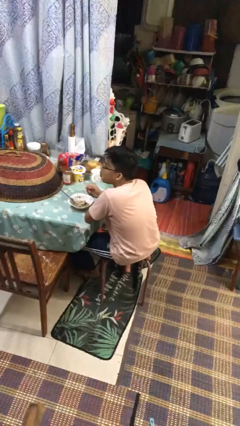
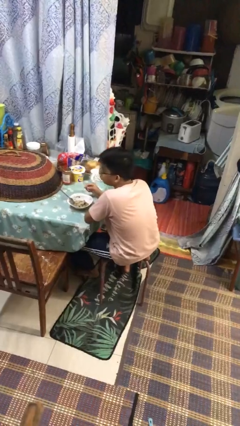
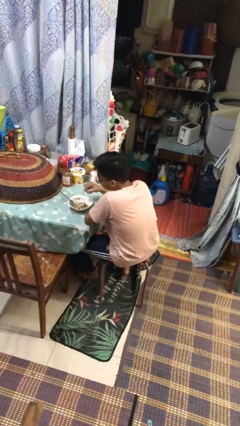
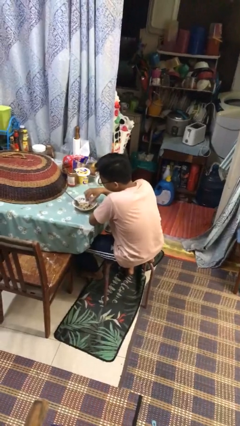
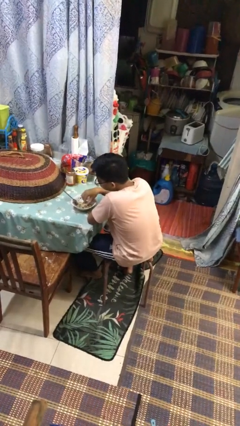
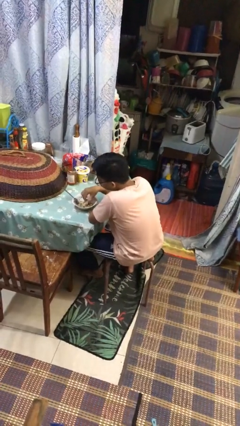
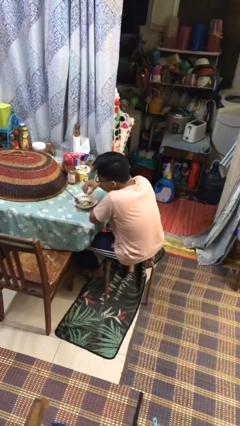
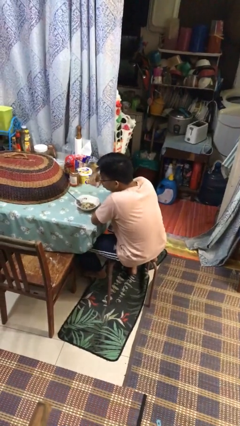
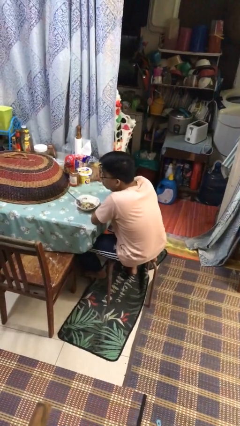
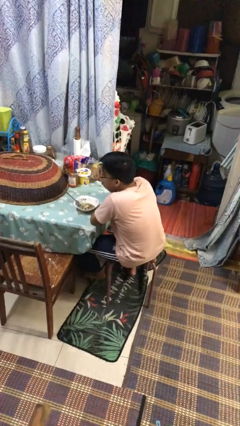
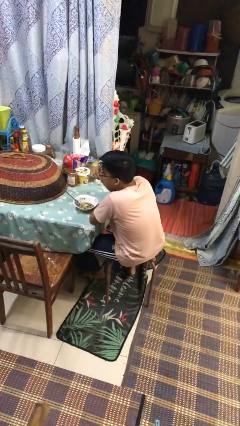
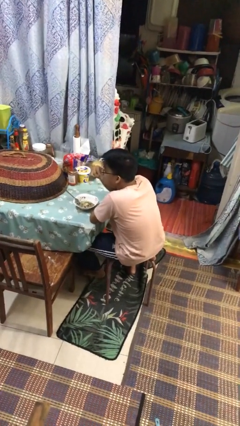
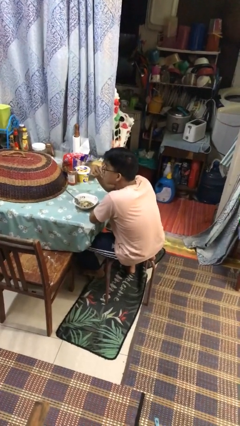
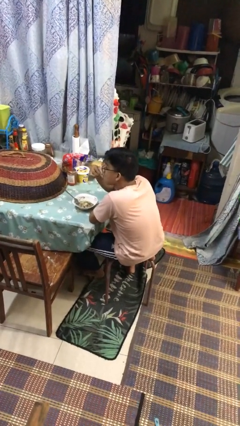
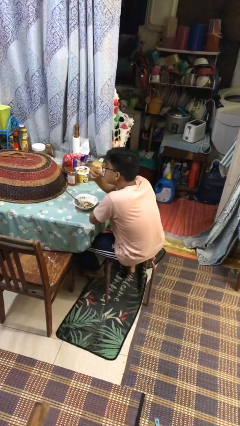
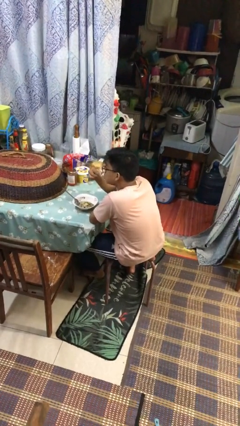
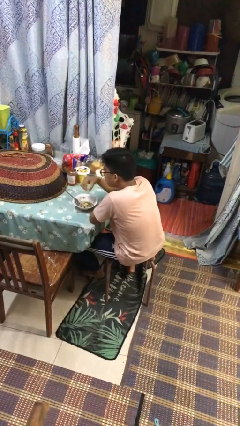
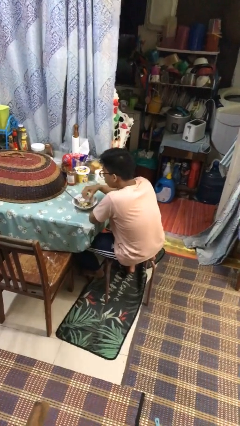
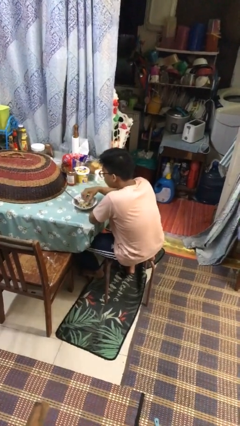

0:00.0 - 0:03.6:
person eats with hands

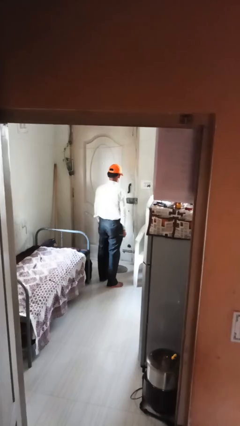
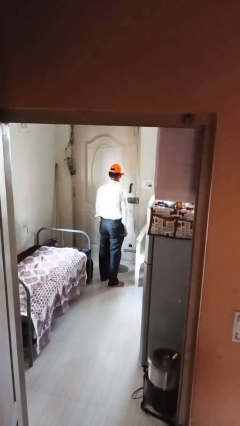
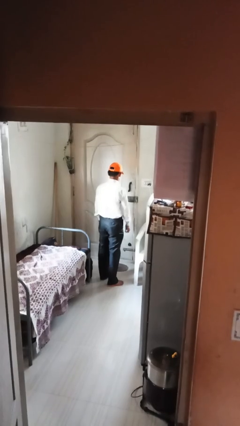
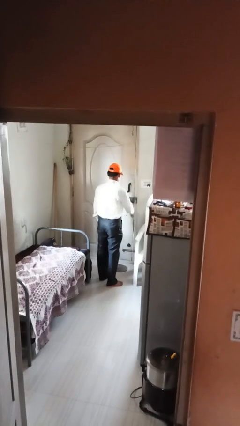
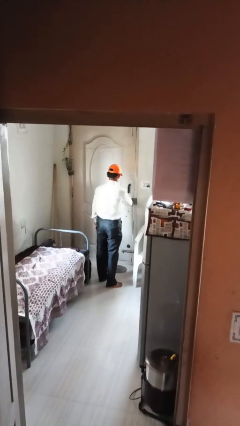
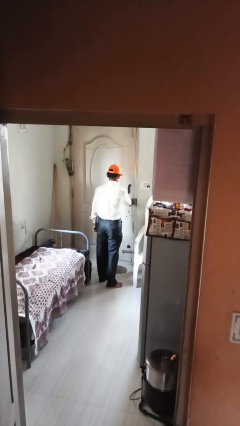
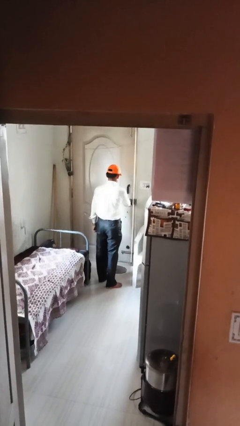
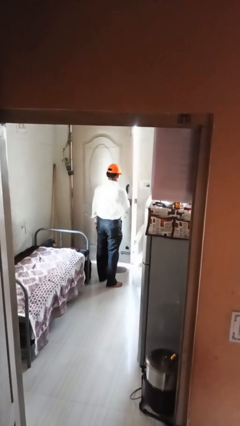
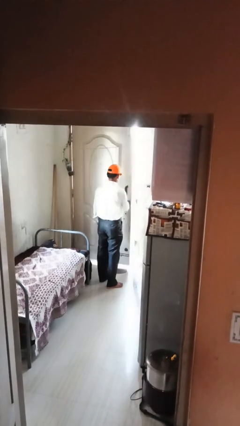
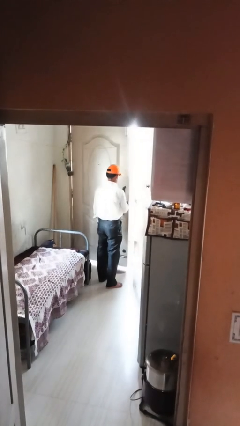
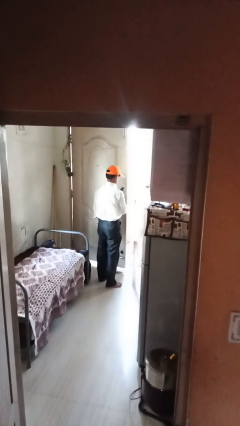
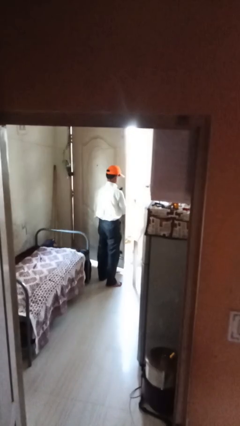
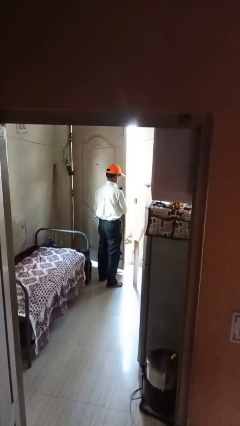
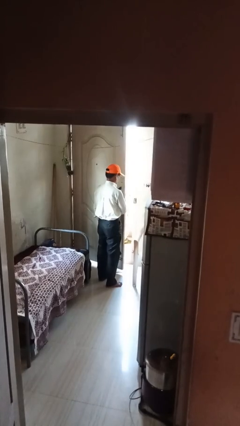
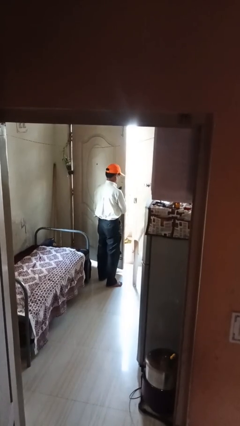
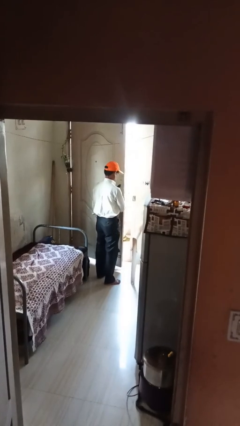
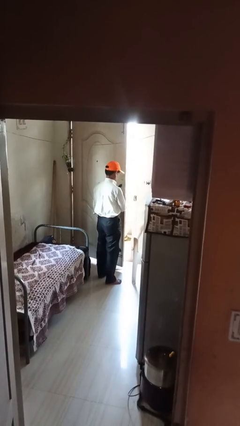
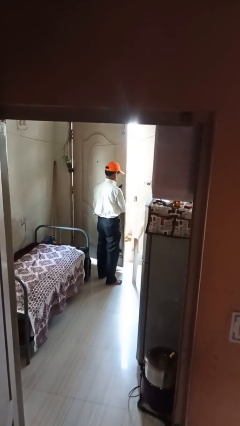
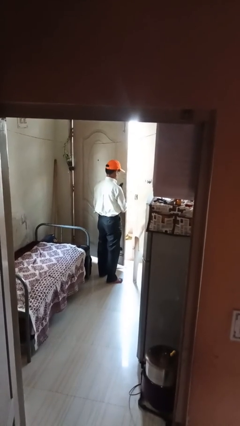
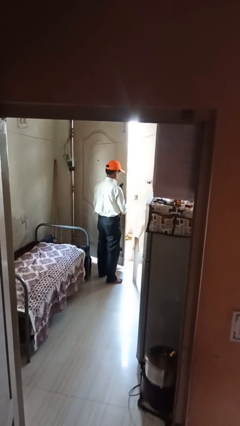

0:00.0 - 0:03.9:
person opens facility door

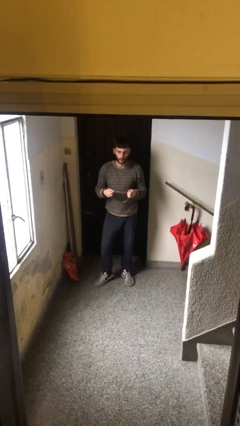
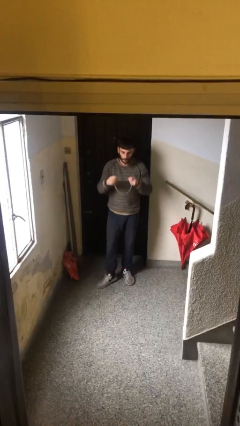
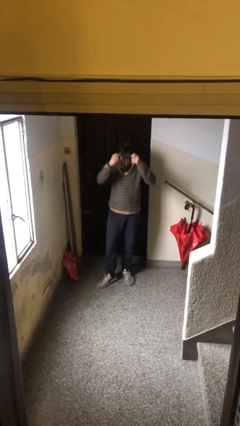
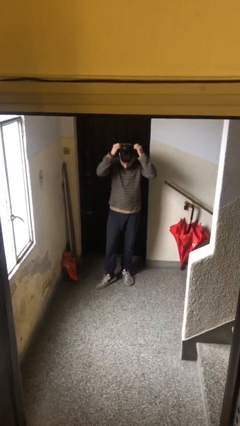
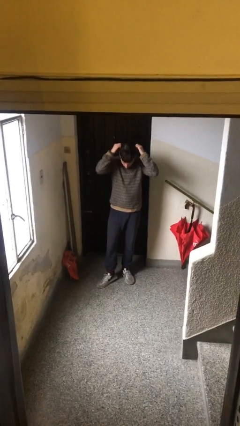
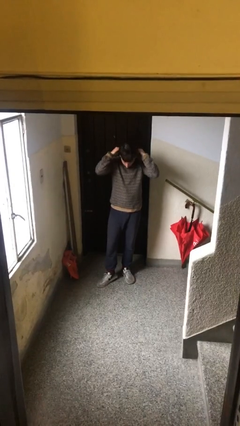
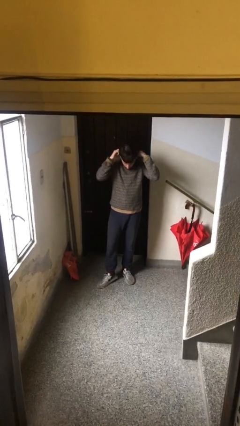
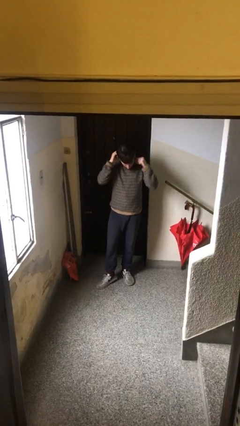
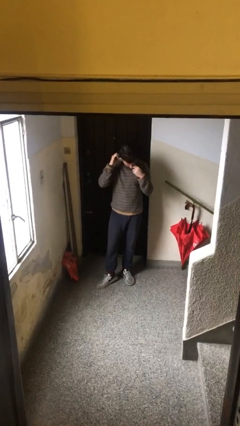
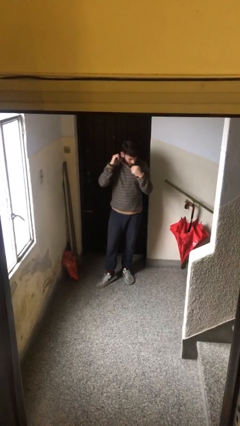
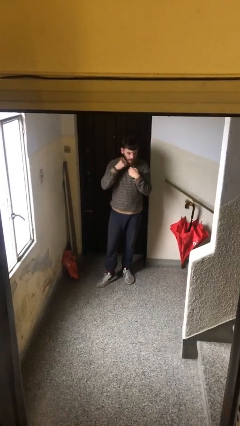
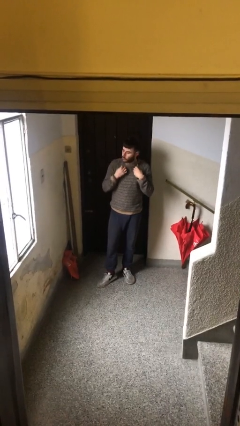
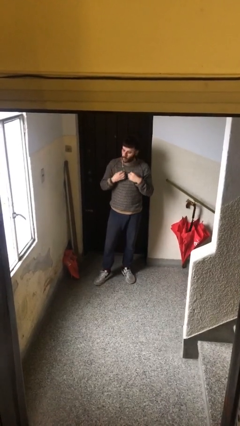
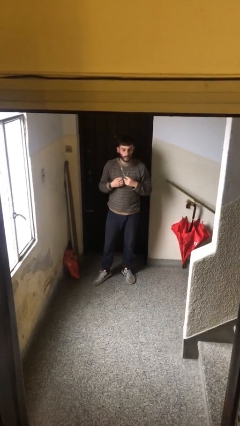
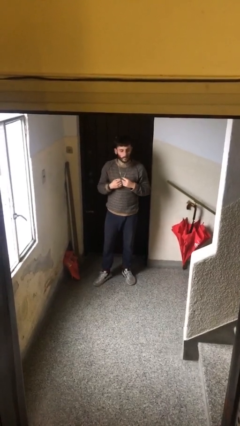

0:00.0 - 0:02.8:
person puts on necklace

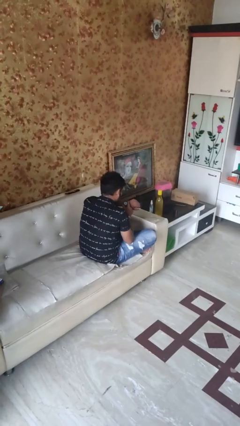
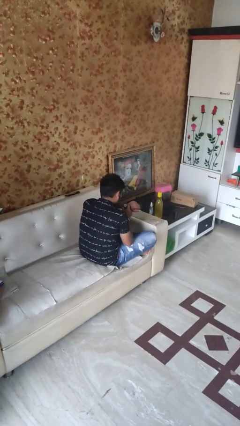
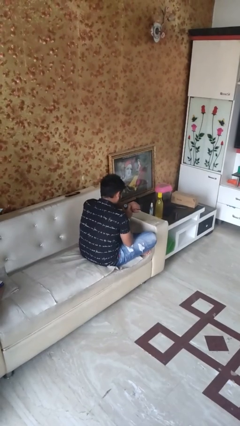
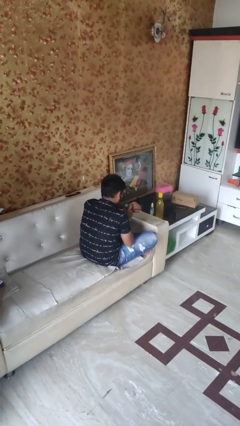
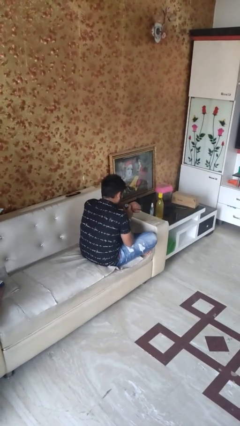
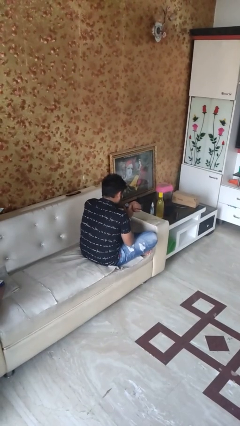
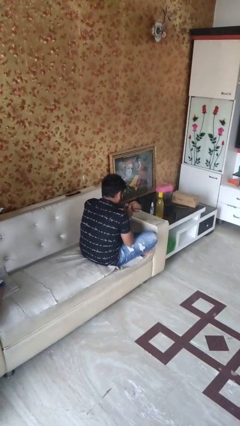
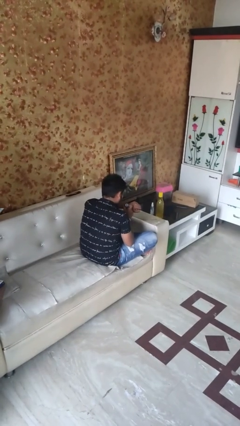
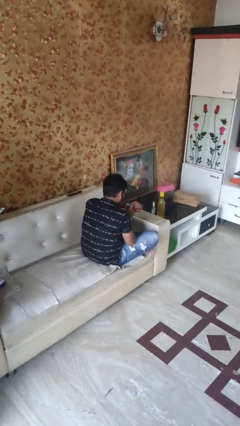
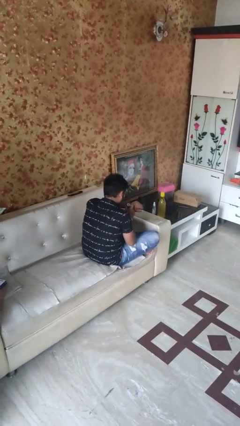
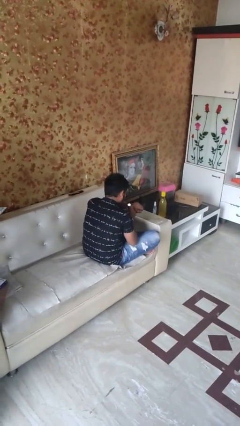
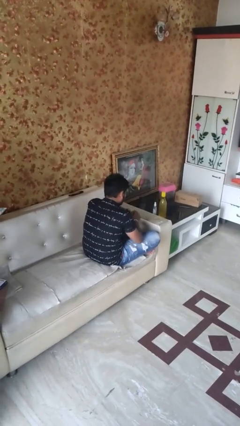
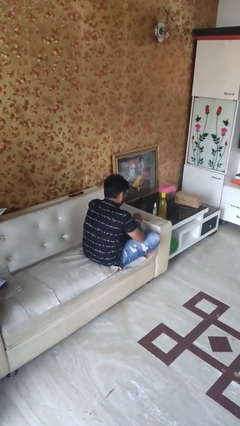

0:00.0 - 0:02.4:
person looks at wristwatch

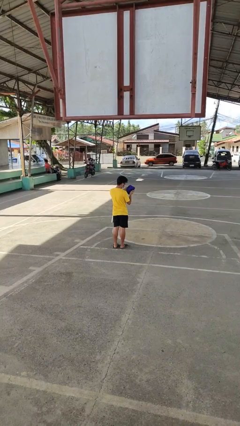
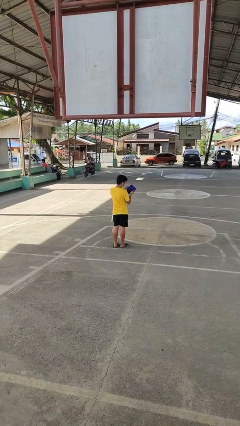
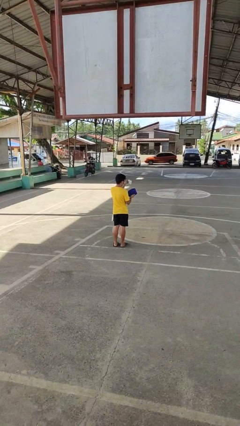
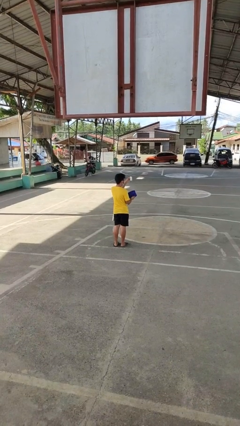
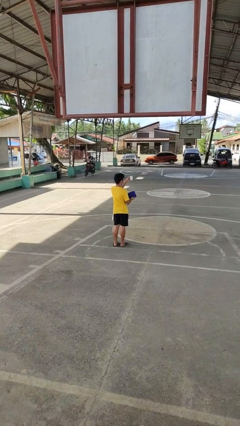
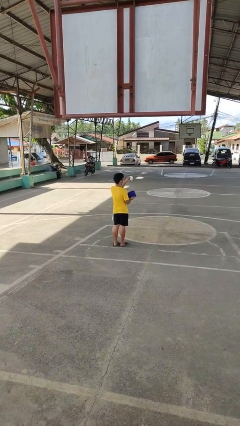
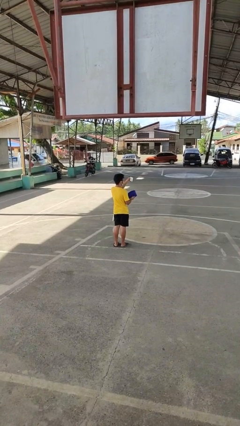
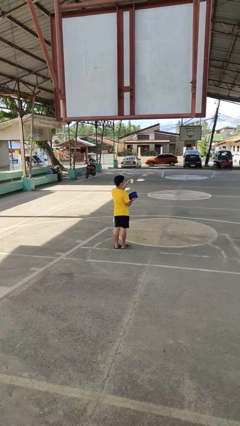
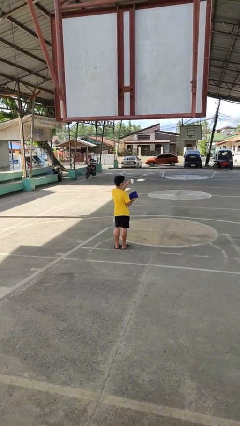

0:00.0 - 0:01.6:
person takes object from purse

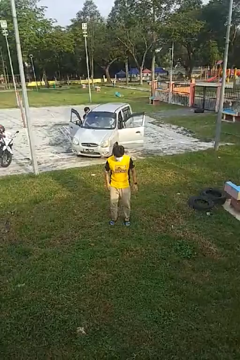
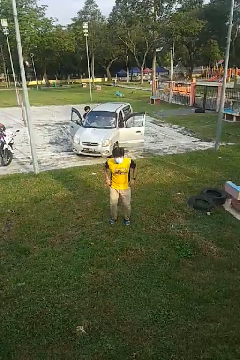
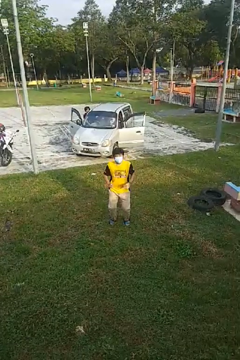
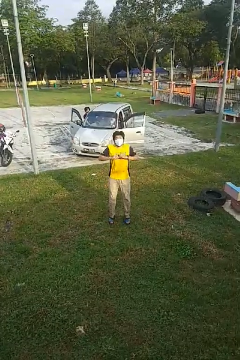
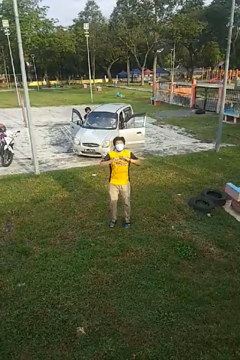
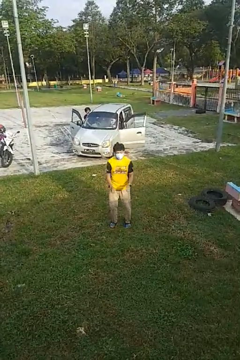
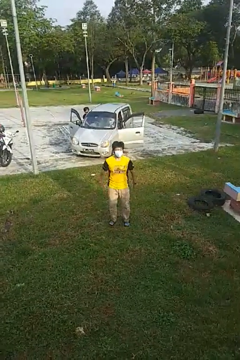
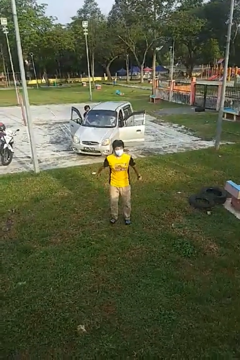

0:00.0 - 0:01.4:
person jumps

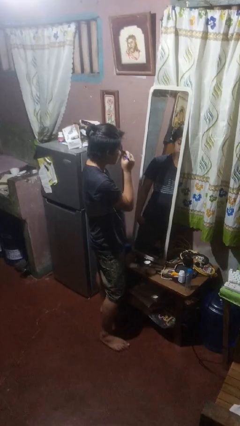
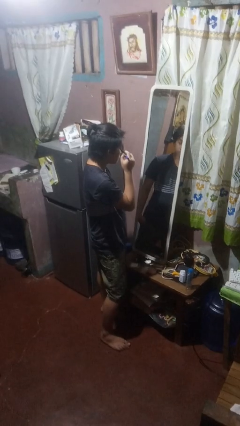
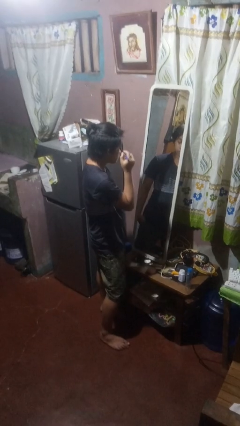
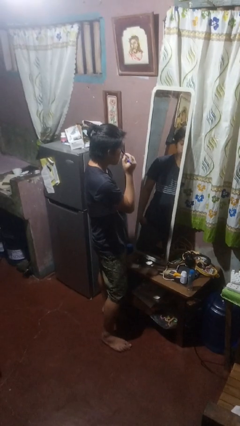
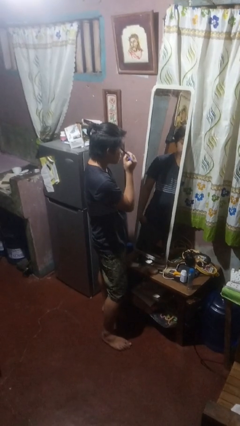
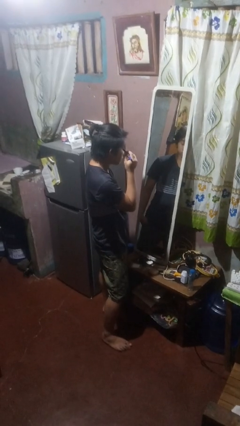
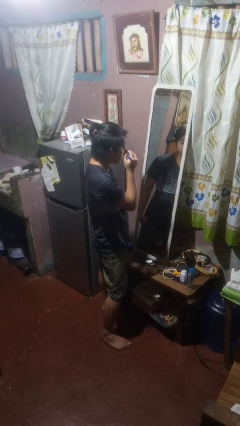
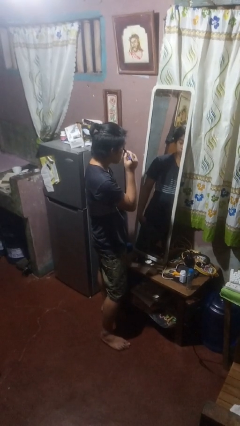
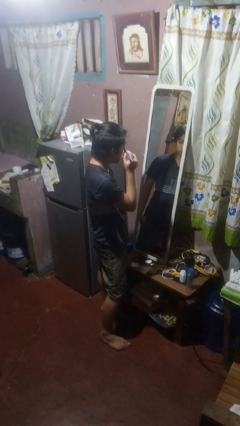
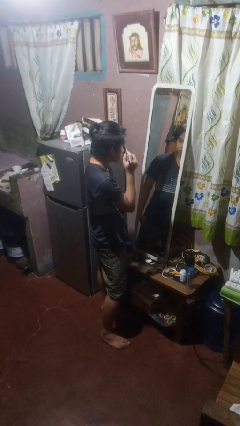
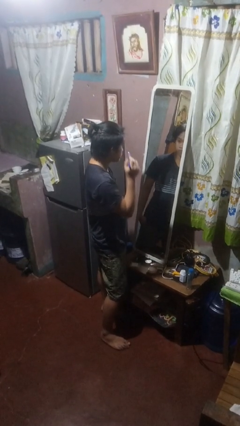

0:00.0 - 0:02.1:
person applies eye makeup
